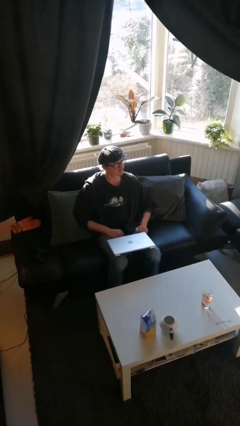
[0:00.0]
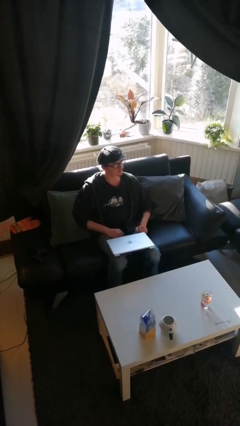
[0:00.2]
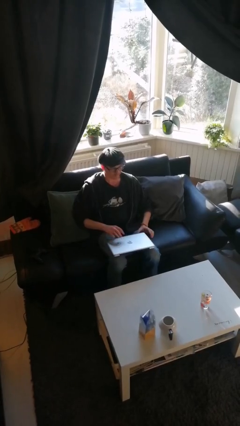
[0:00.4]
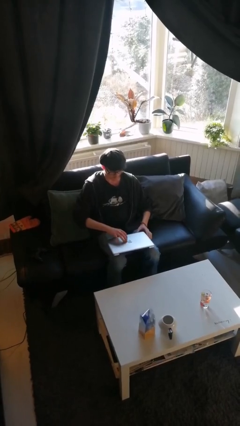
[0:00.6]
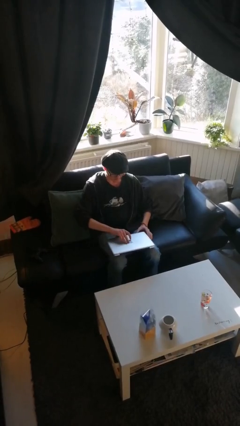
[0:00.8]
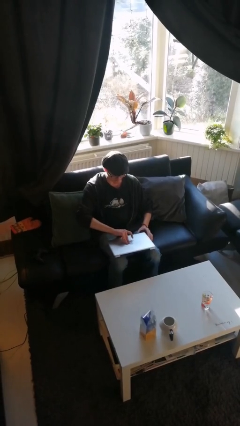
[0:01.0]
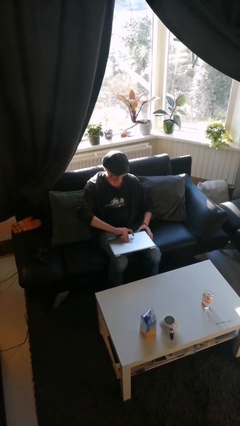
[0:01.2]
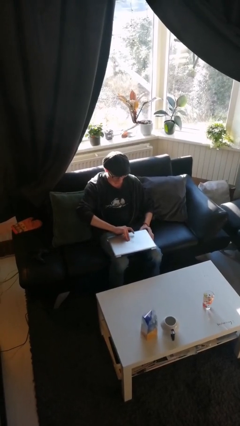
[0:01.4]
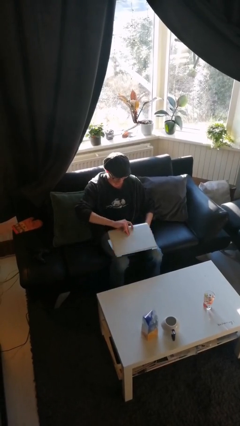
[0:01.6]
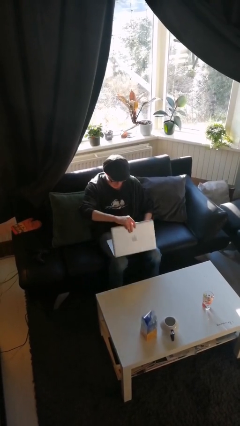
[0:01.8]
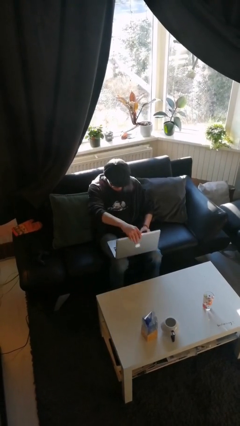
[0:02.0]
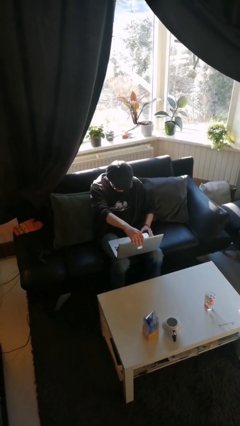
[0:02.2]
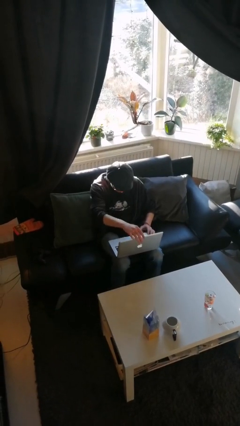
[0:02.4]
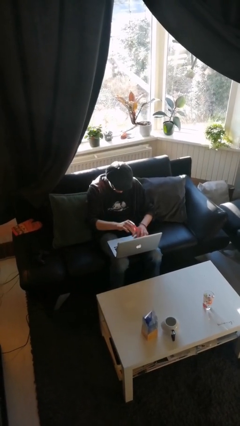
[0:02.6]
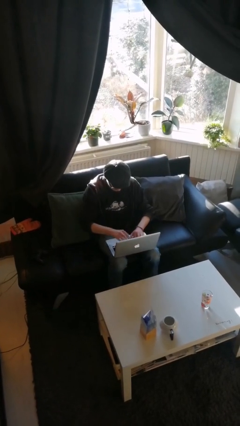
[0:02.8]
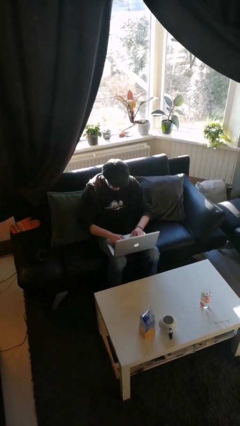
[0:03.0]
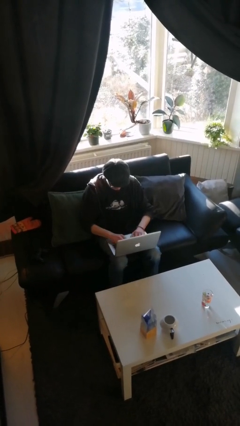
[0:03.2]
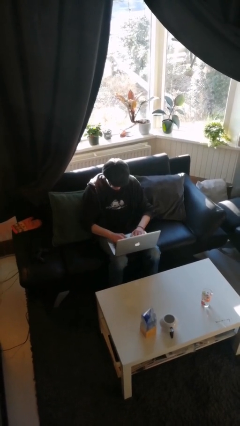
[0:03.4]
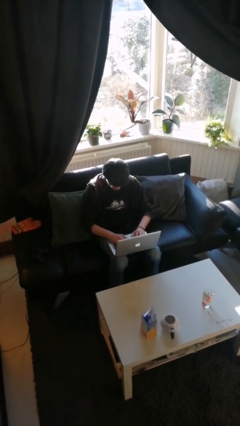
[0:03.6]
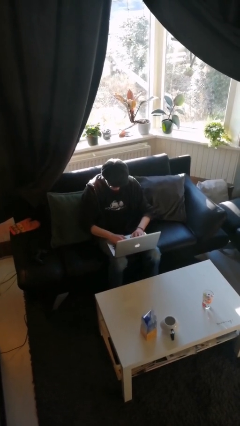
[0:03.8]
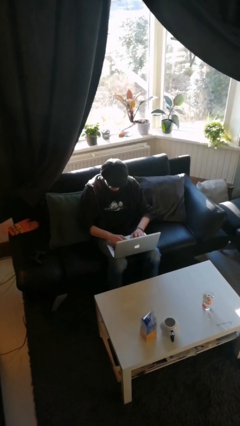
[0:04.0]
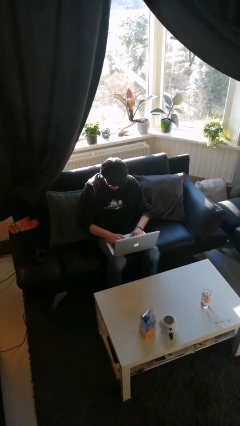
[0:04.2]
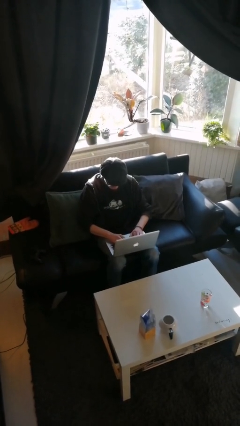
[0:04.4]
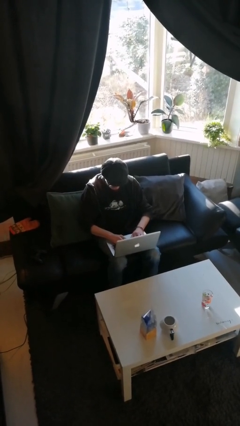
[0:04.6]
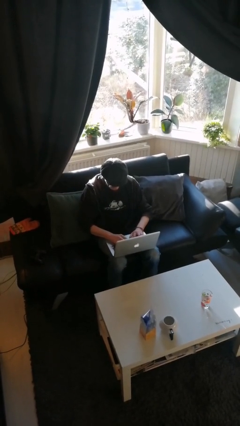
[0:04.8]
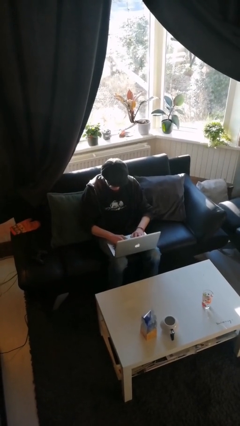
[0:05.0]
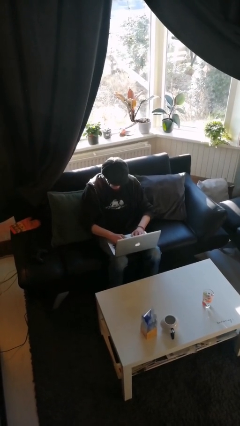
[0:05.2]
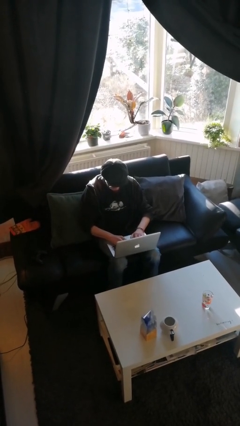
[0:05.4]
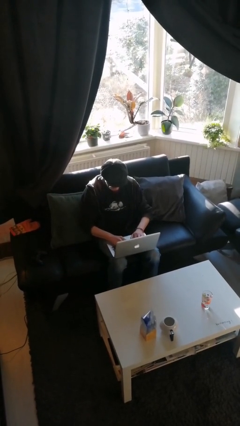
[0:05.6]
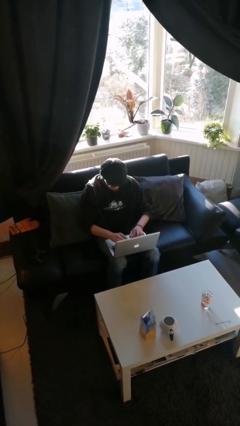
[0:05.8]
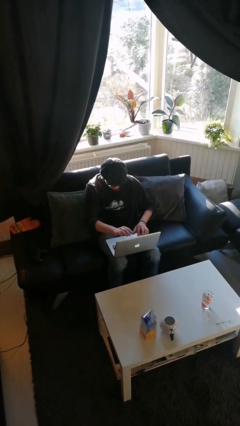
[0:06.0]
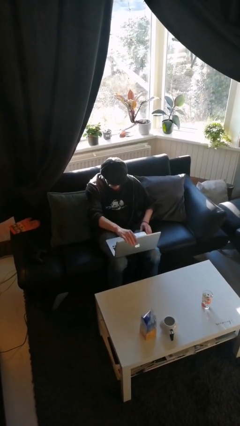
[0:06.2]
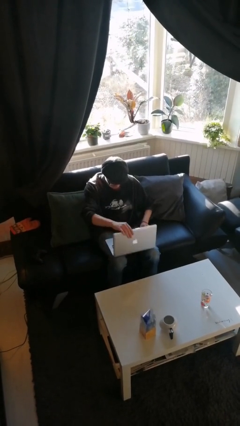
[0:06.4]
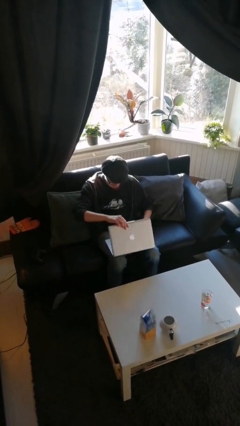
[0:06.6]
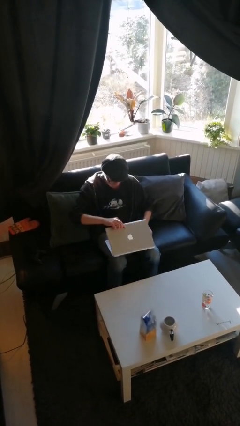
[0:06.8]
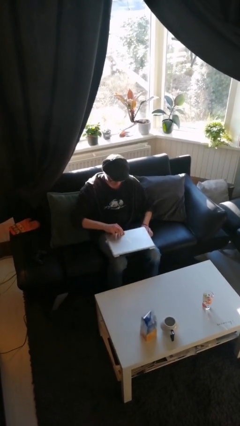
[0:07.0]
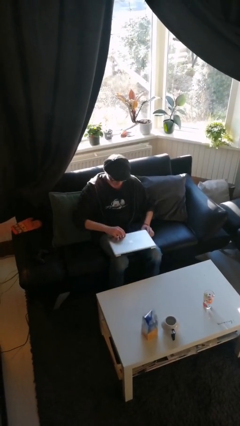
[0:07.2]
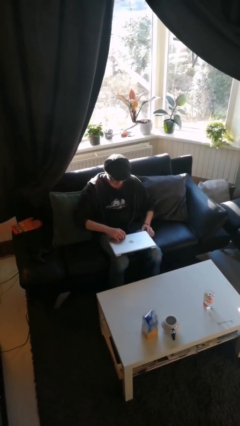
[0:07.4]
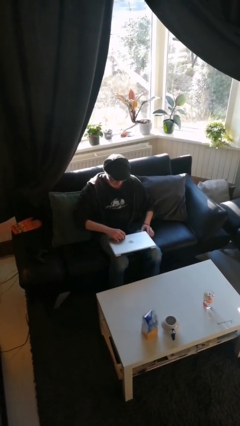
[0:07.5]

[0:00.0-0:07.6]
person interacts with laptop

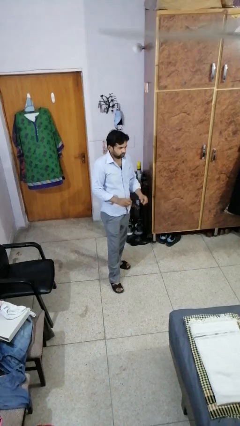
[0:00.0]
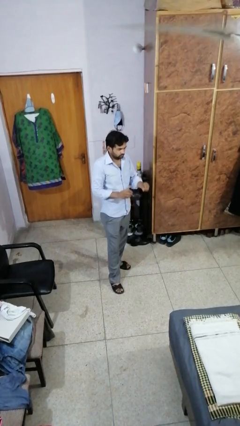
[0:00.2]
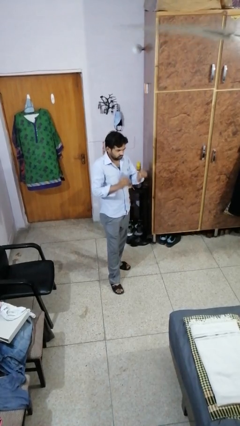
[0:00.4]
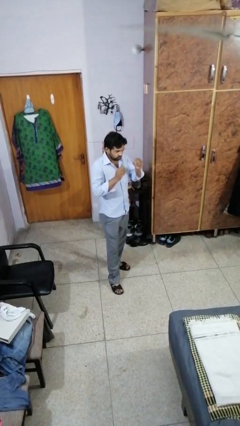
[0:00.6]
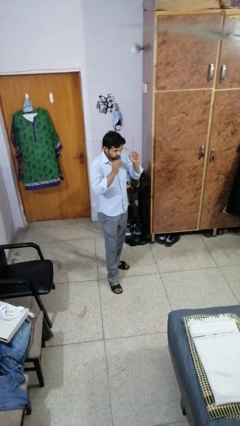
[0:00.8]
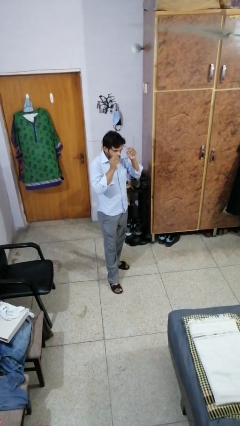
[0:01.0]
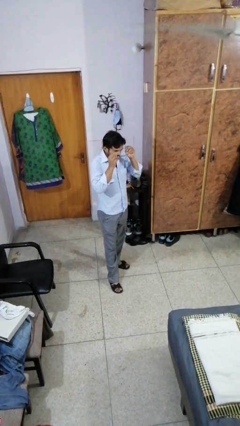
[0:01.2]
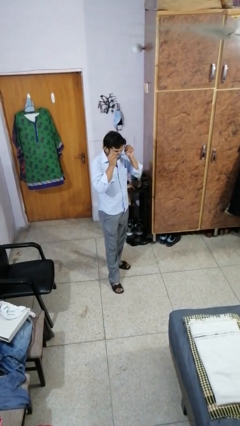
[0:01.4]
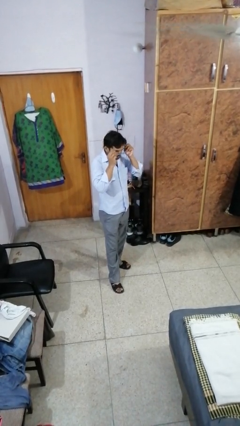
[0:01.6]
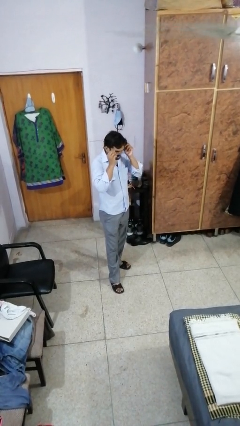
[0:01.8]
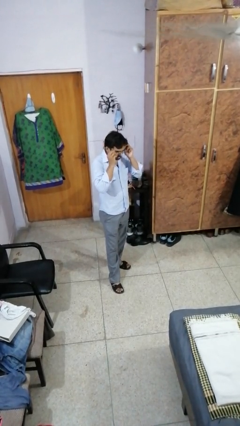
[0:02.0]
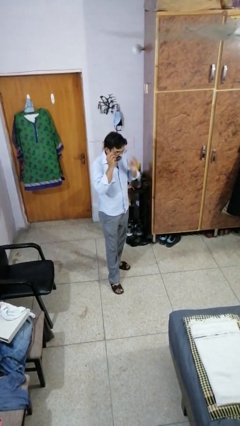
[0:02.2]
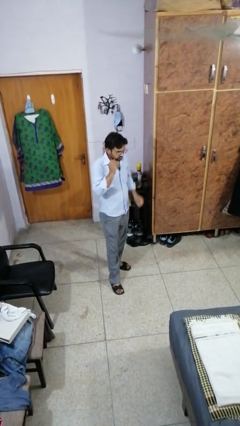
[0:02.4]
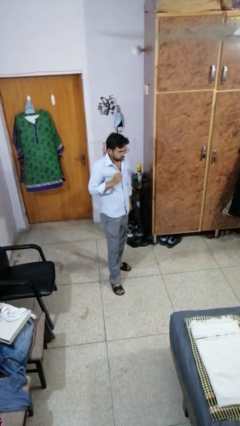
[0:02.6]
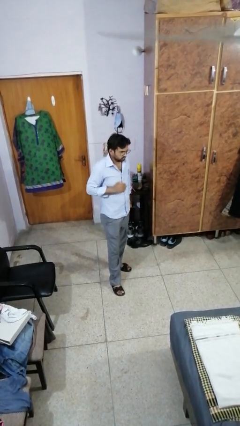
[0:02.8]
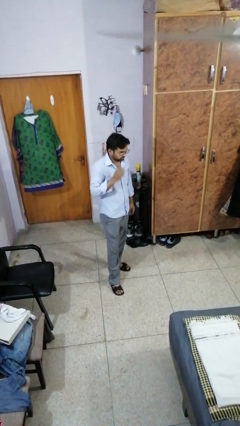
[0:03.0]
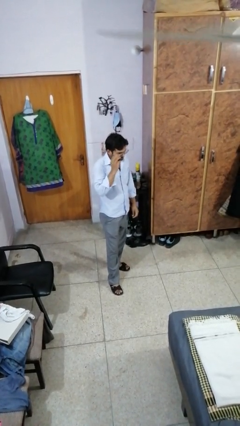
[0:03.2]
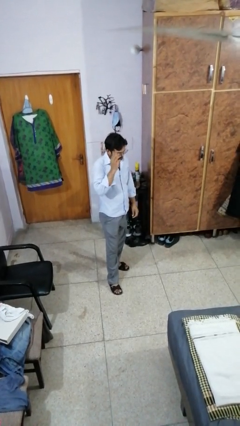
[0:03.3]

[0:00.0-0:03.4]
person puts on glasses

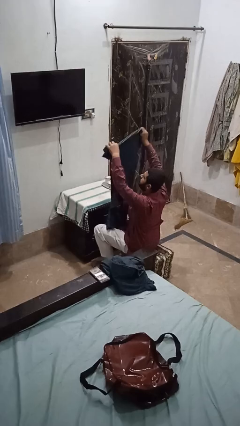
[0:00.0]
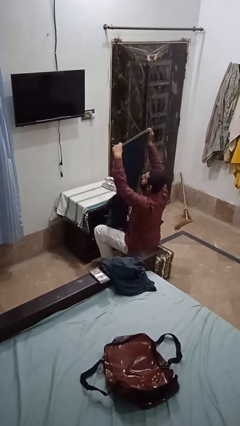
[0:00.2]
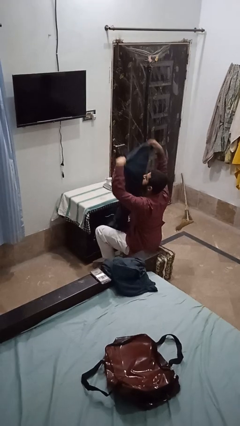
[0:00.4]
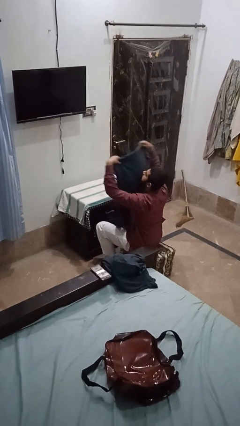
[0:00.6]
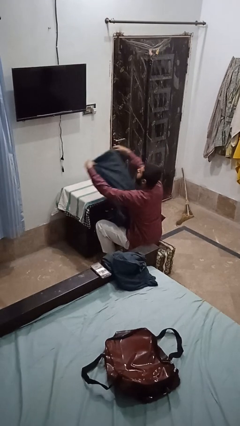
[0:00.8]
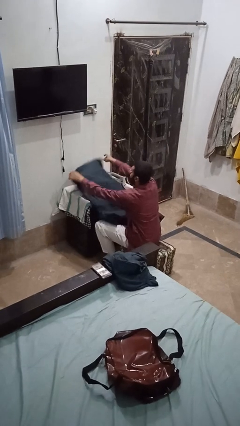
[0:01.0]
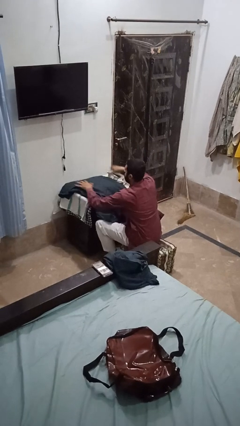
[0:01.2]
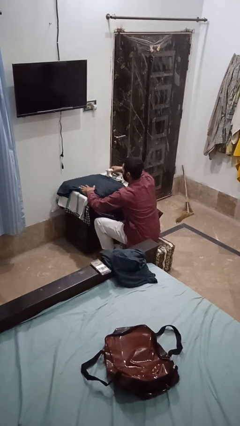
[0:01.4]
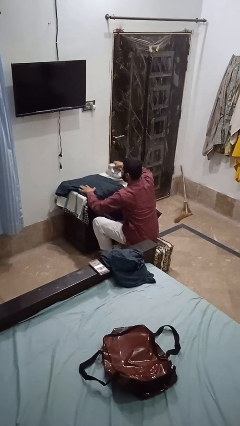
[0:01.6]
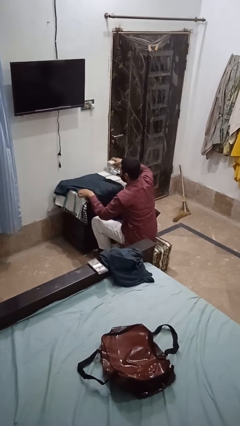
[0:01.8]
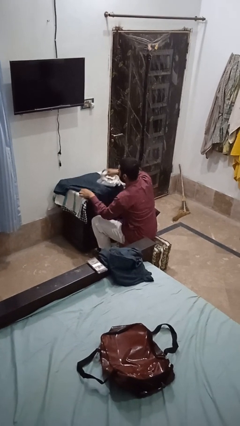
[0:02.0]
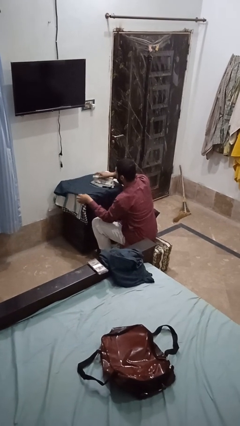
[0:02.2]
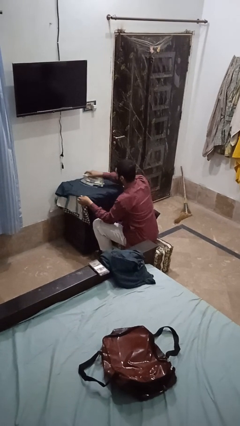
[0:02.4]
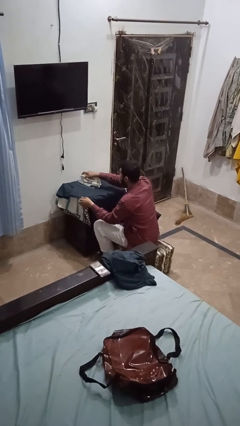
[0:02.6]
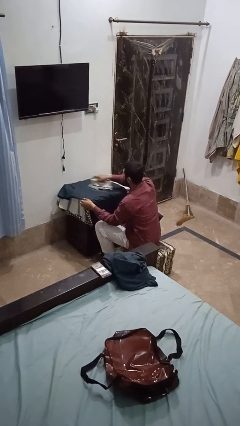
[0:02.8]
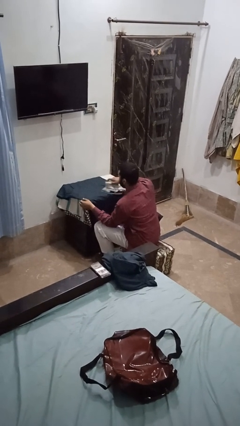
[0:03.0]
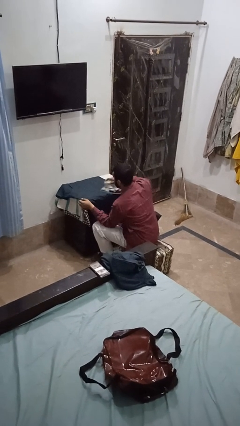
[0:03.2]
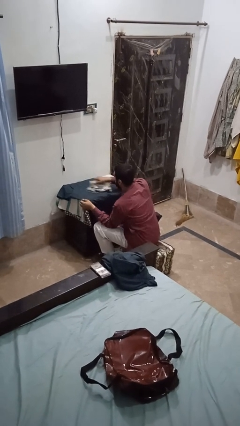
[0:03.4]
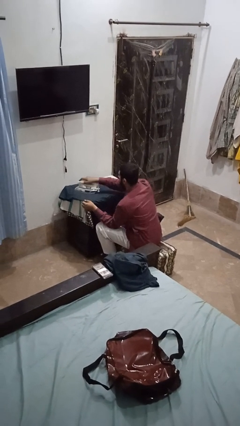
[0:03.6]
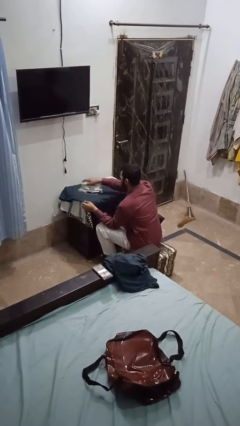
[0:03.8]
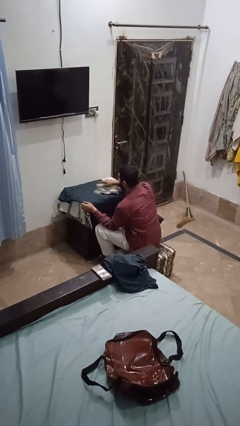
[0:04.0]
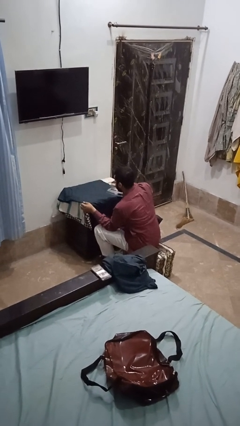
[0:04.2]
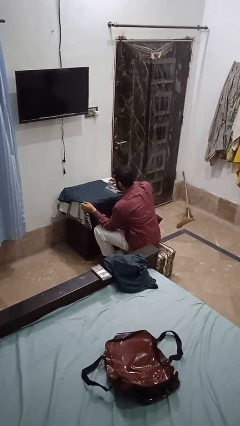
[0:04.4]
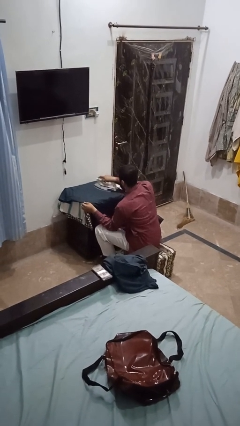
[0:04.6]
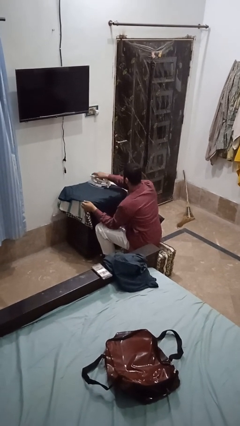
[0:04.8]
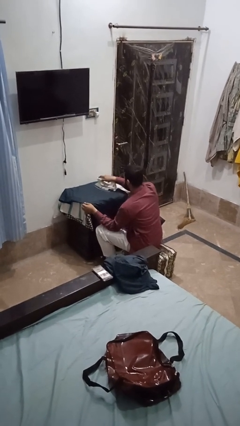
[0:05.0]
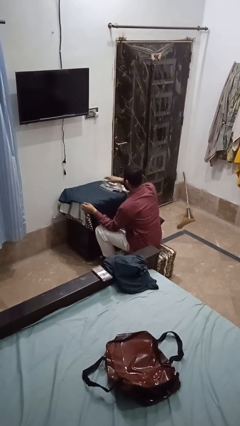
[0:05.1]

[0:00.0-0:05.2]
person irons clothes

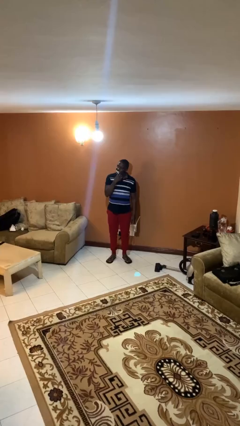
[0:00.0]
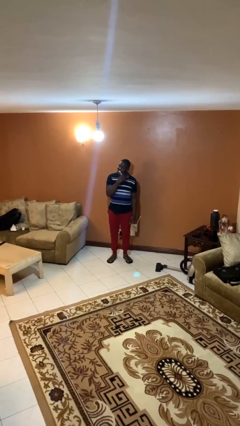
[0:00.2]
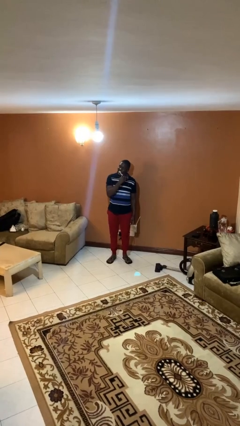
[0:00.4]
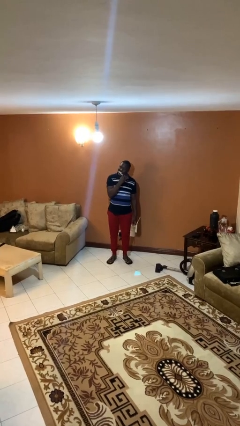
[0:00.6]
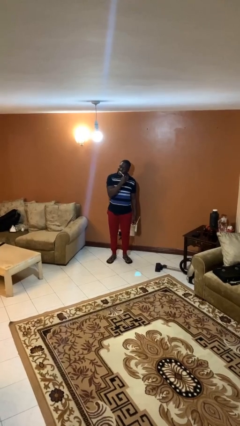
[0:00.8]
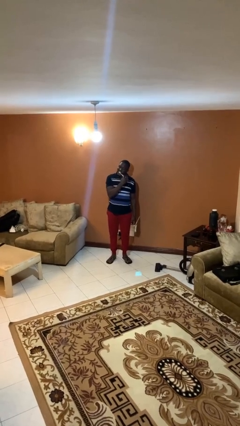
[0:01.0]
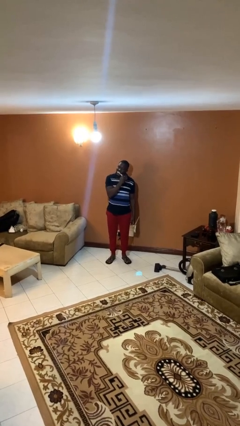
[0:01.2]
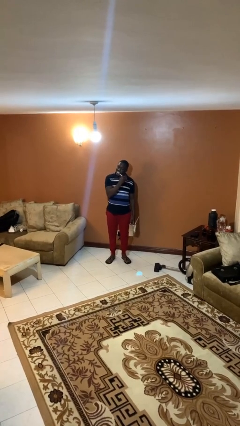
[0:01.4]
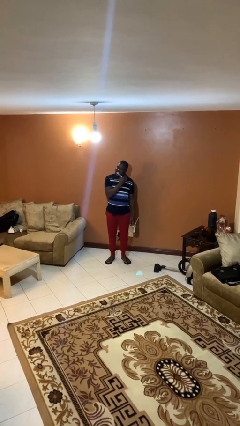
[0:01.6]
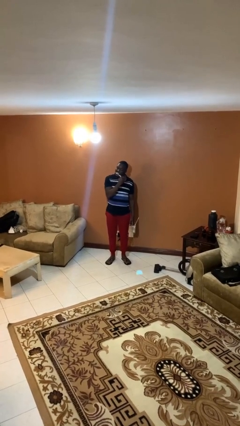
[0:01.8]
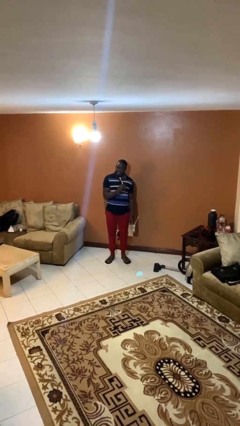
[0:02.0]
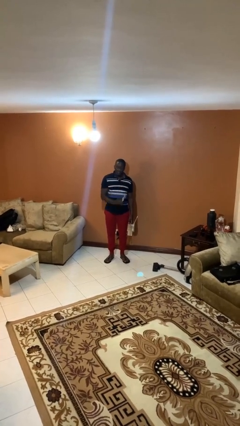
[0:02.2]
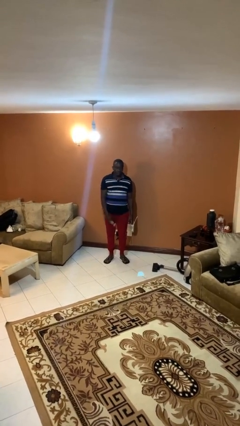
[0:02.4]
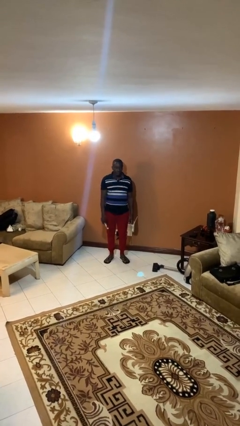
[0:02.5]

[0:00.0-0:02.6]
person brushes teeth
